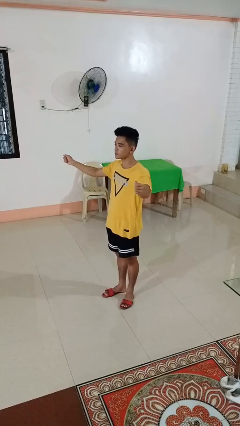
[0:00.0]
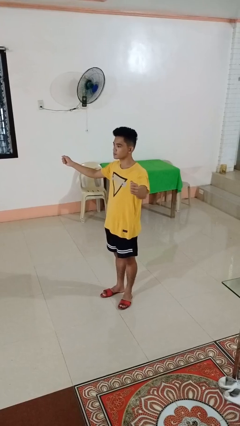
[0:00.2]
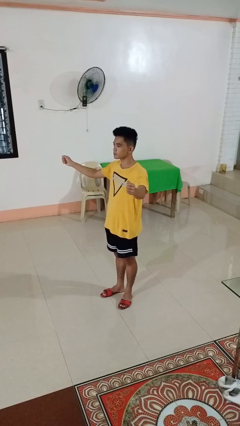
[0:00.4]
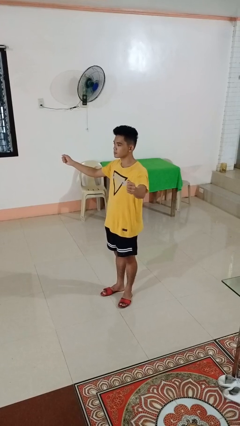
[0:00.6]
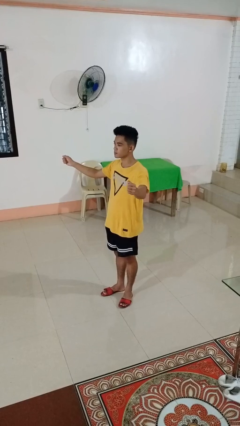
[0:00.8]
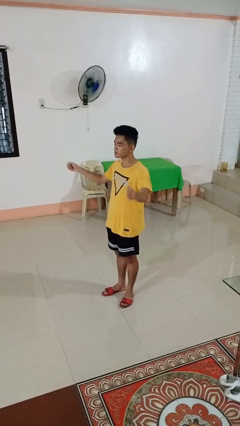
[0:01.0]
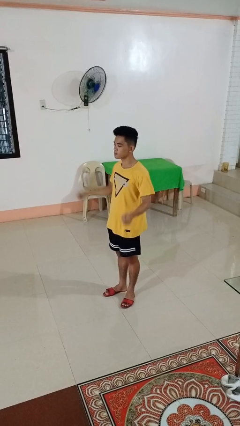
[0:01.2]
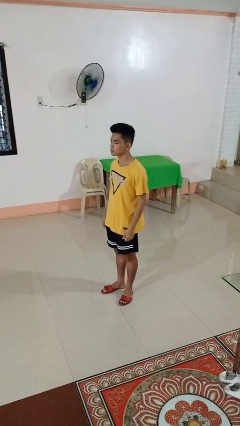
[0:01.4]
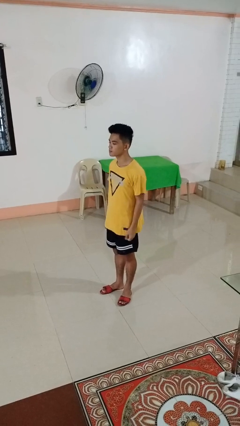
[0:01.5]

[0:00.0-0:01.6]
person gestures zoom out

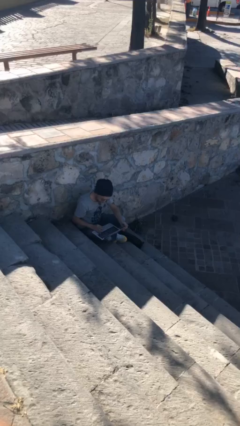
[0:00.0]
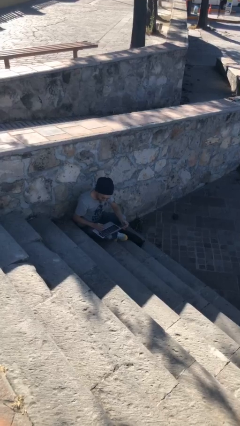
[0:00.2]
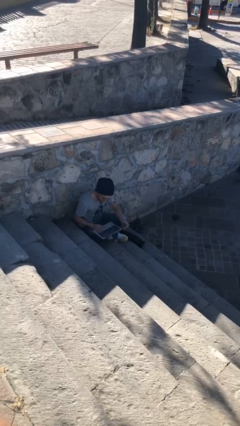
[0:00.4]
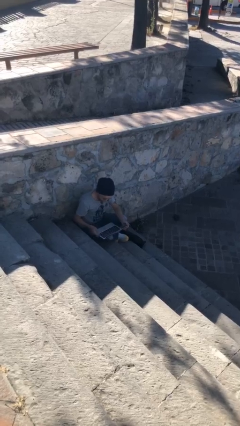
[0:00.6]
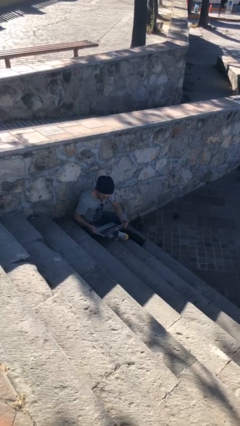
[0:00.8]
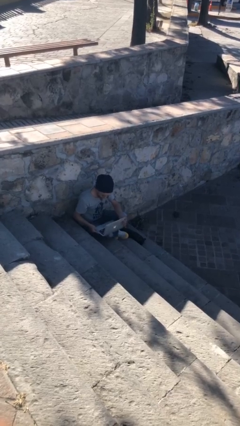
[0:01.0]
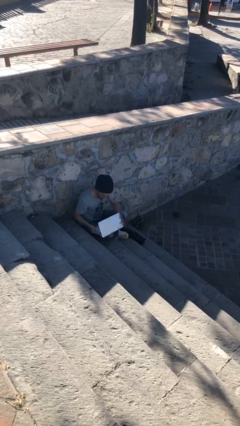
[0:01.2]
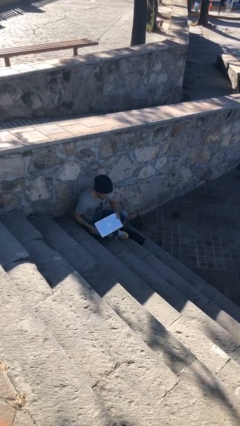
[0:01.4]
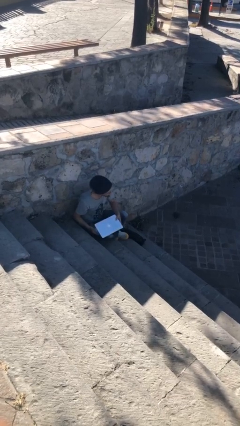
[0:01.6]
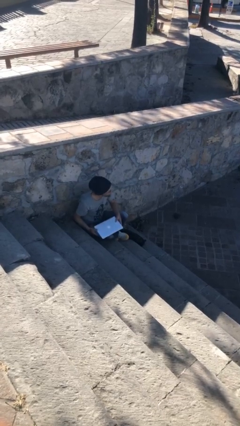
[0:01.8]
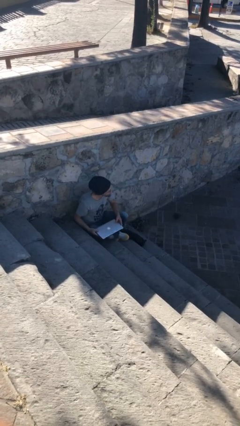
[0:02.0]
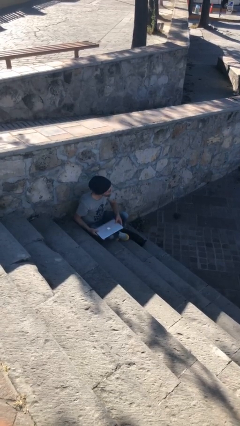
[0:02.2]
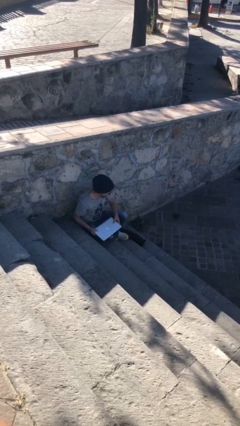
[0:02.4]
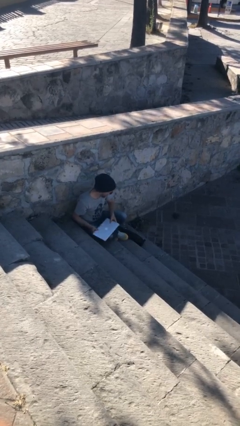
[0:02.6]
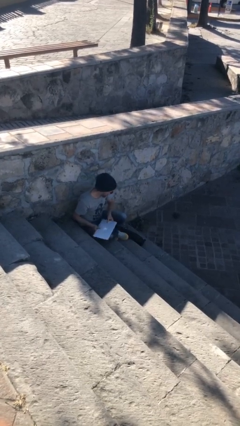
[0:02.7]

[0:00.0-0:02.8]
person interacts with laptop

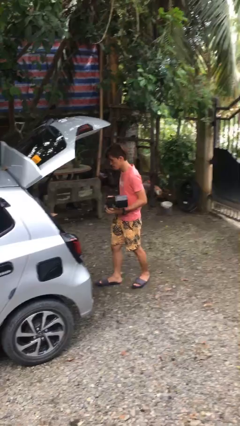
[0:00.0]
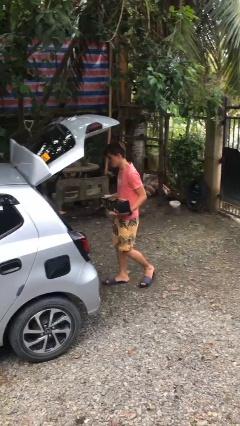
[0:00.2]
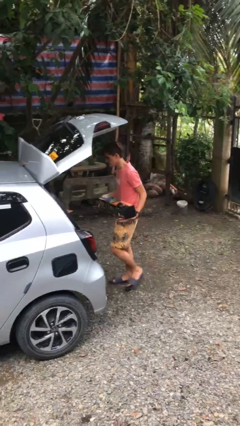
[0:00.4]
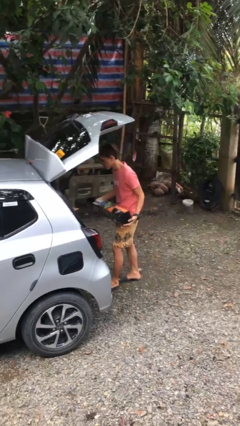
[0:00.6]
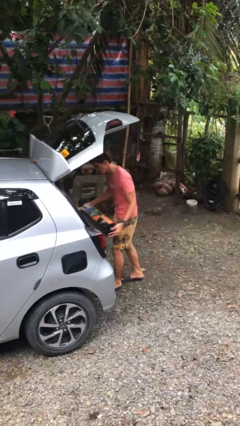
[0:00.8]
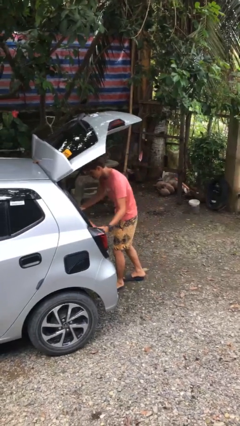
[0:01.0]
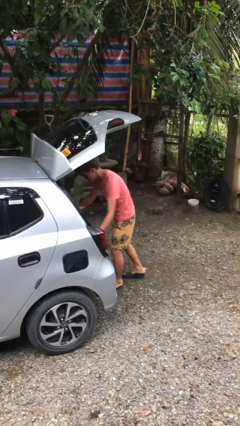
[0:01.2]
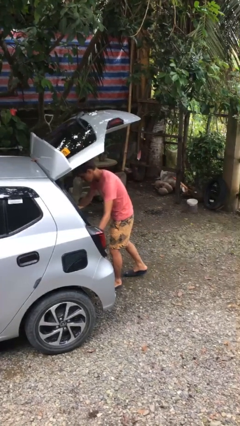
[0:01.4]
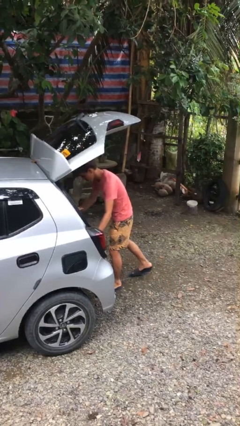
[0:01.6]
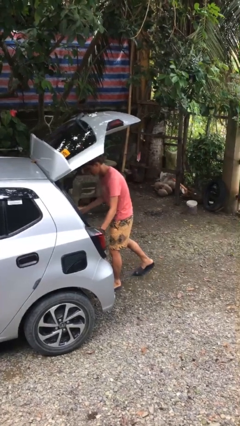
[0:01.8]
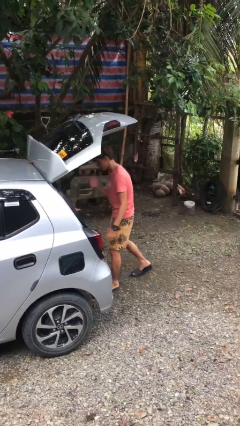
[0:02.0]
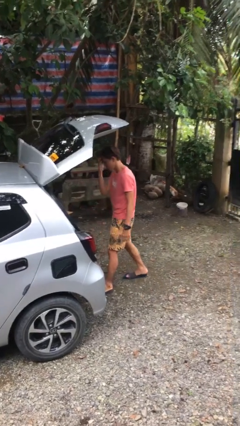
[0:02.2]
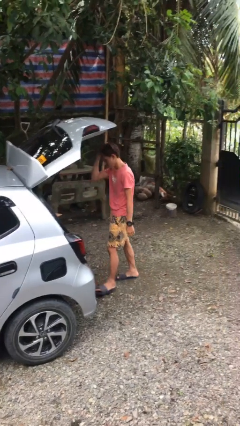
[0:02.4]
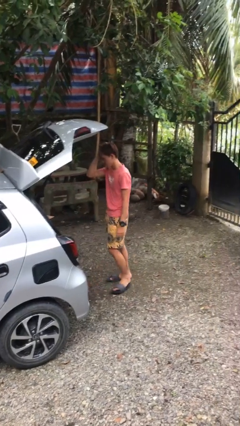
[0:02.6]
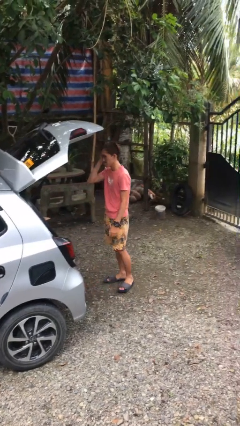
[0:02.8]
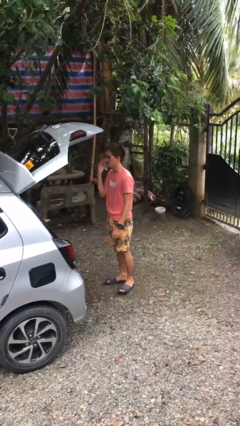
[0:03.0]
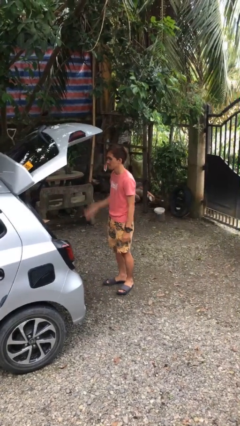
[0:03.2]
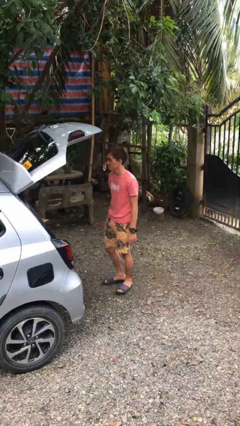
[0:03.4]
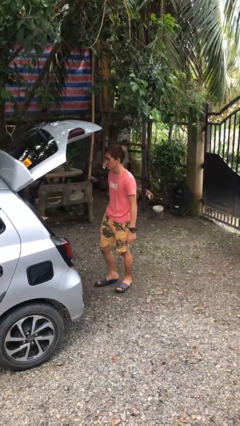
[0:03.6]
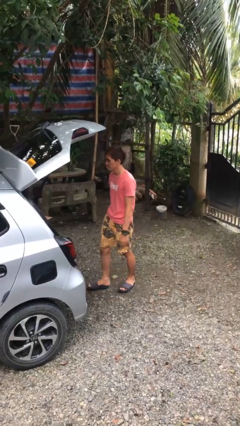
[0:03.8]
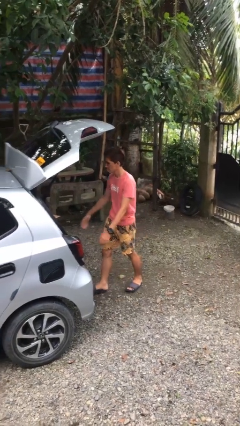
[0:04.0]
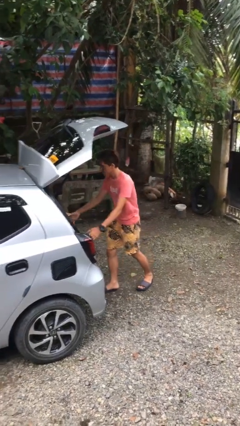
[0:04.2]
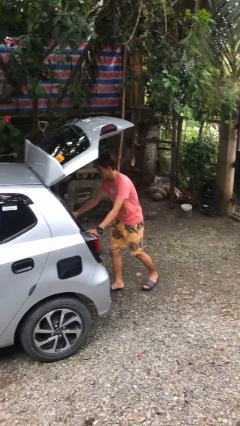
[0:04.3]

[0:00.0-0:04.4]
person loads car

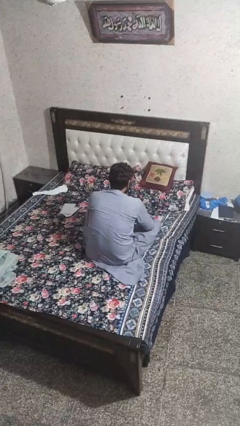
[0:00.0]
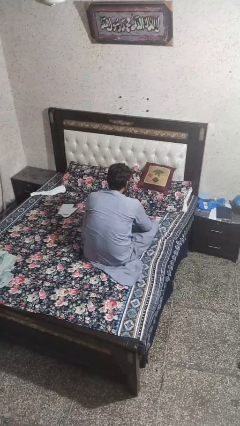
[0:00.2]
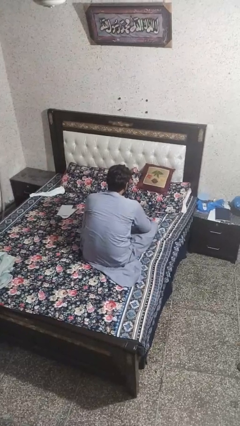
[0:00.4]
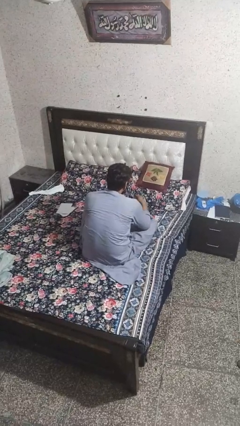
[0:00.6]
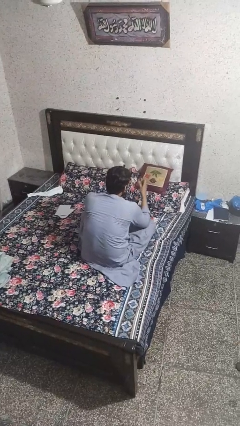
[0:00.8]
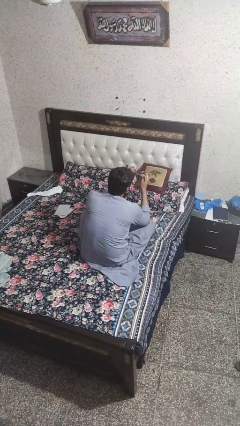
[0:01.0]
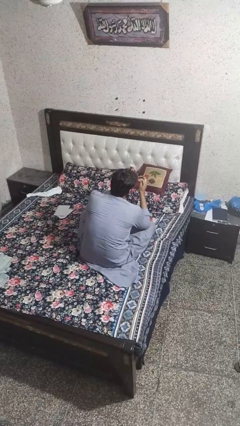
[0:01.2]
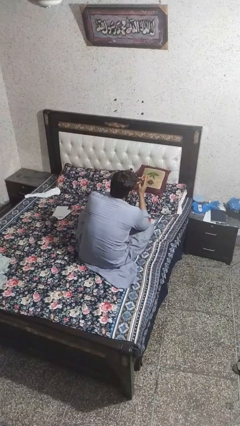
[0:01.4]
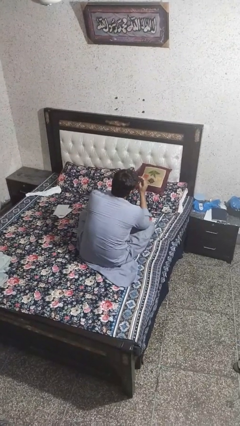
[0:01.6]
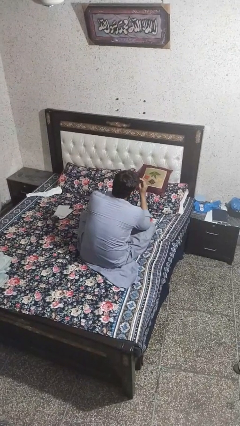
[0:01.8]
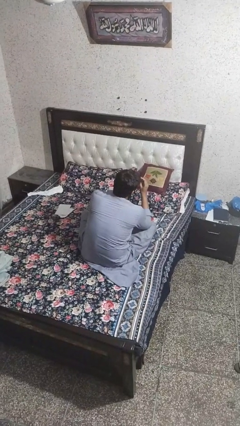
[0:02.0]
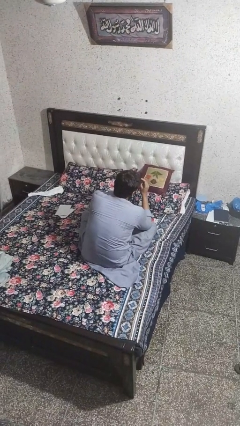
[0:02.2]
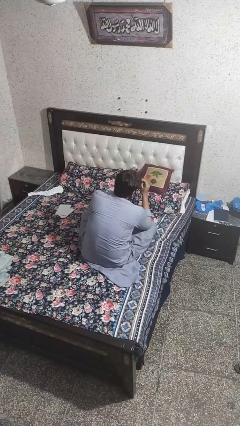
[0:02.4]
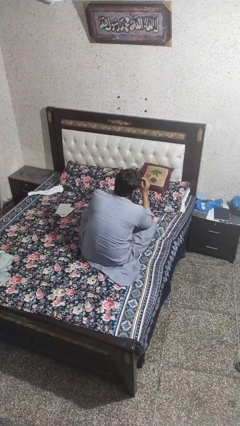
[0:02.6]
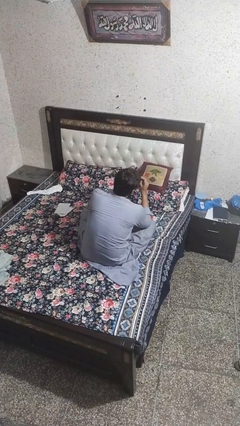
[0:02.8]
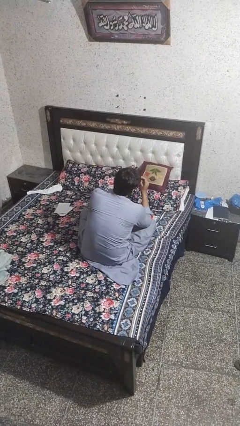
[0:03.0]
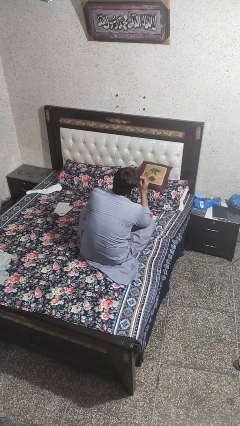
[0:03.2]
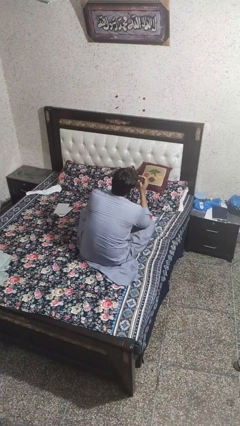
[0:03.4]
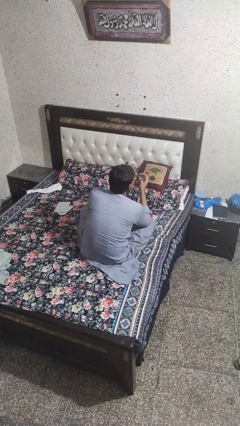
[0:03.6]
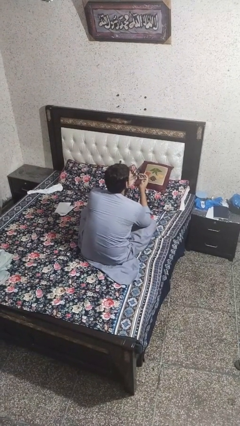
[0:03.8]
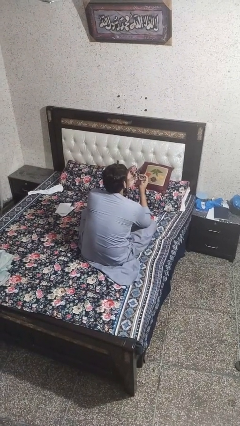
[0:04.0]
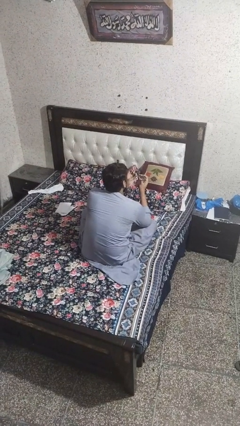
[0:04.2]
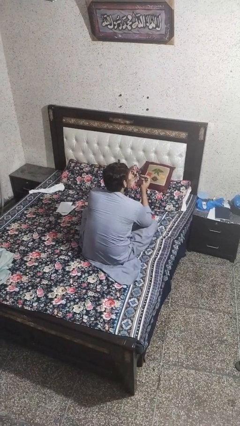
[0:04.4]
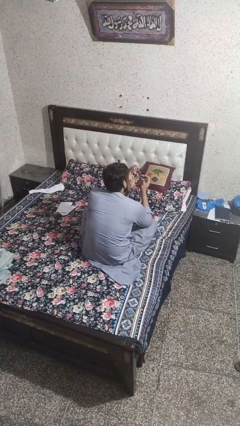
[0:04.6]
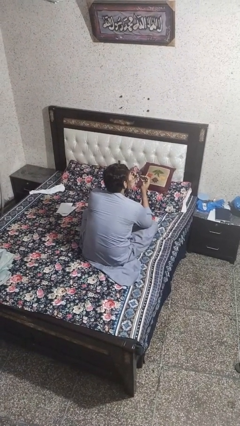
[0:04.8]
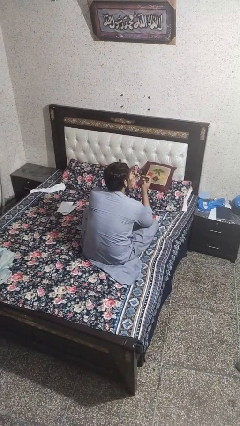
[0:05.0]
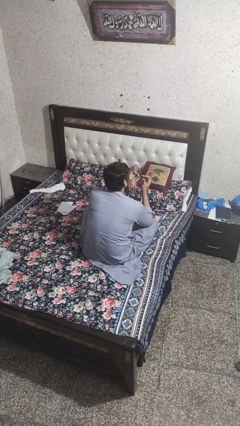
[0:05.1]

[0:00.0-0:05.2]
person clips fingernails

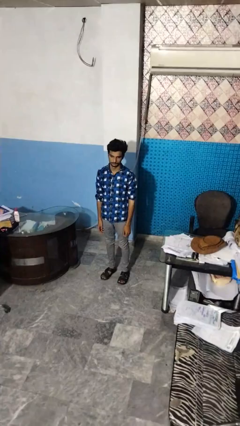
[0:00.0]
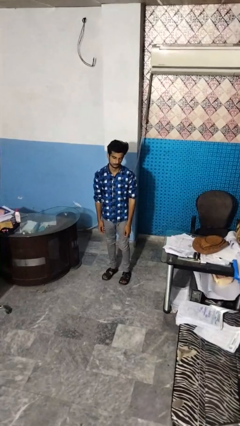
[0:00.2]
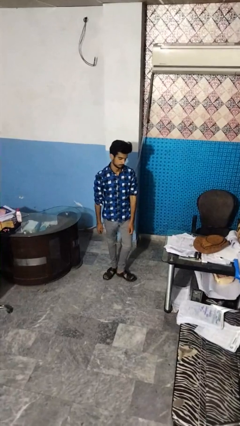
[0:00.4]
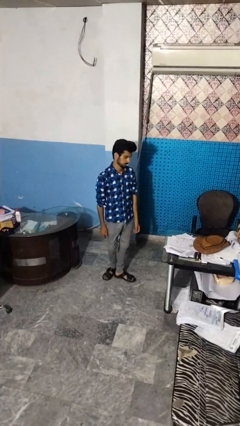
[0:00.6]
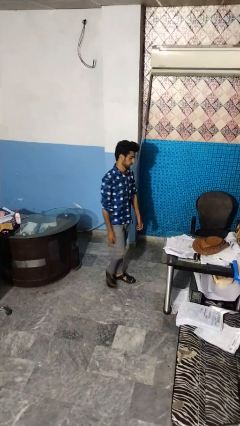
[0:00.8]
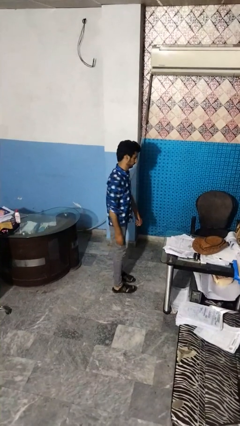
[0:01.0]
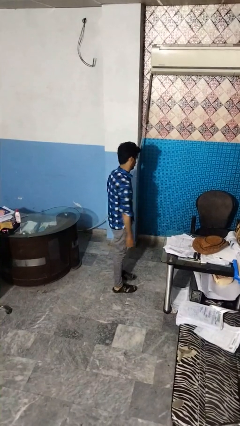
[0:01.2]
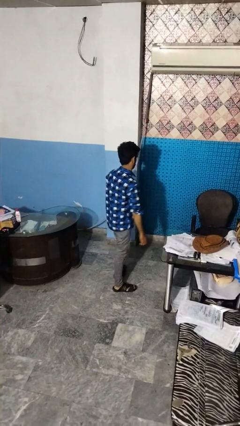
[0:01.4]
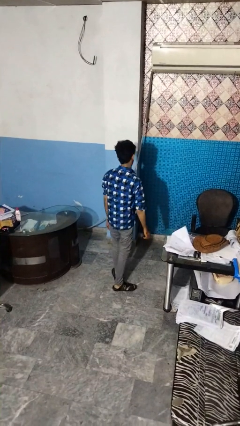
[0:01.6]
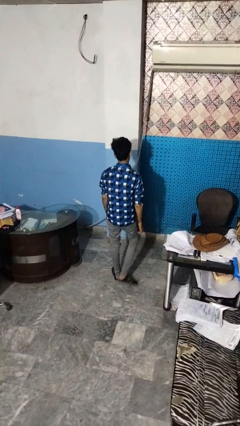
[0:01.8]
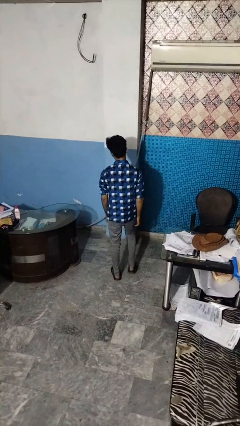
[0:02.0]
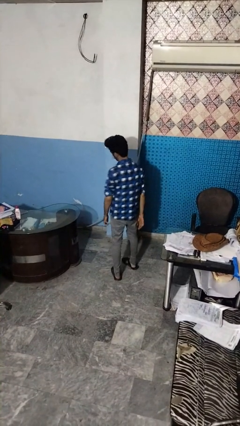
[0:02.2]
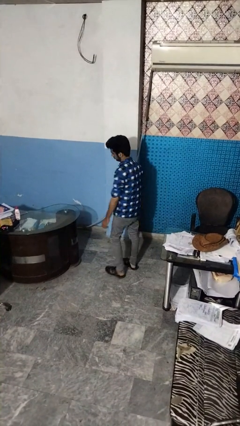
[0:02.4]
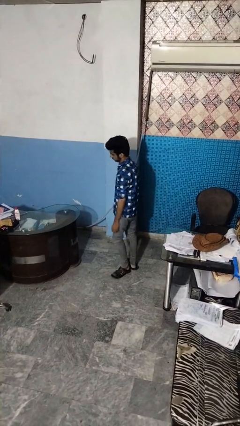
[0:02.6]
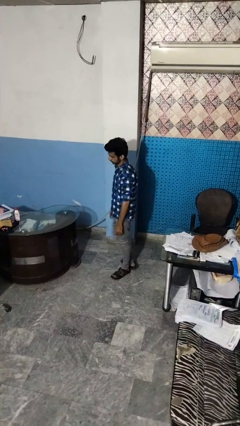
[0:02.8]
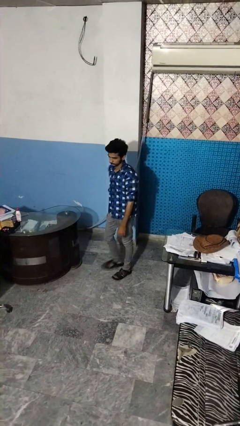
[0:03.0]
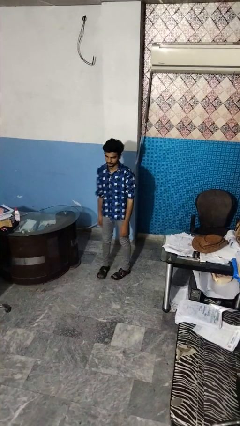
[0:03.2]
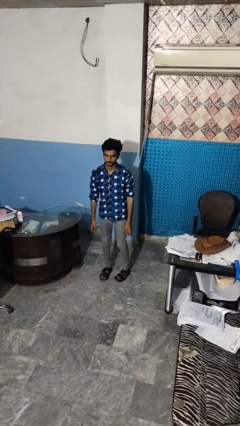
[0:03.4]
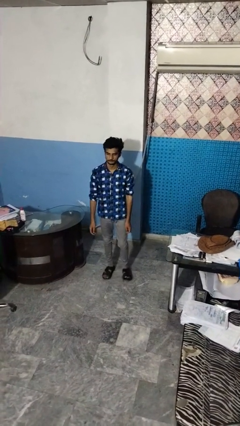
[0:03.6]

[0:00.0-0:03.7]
person twirls
